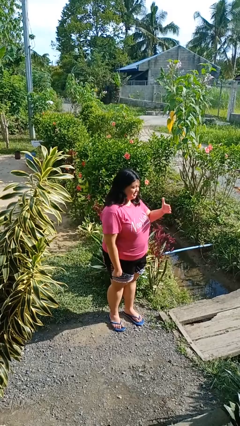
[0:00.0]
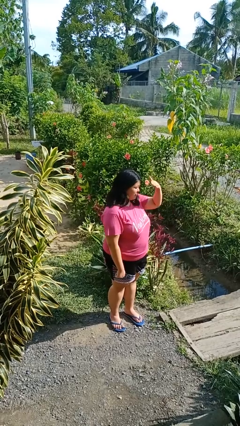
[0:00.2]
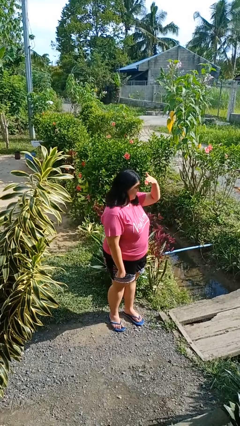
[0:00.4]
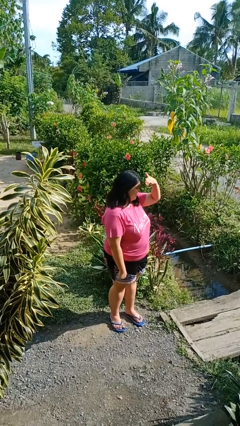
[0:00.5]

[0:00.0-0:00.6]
person shades eyes

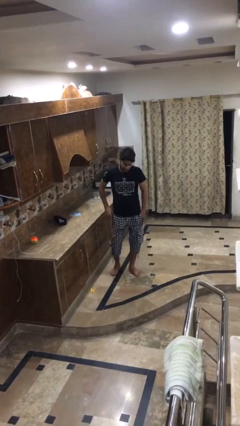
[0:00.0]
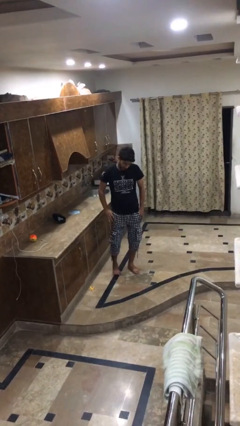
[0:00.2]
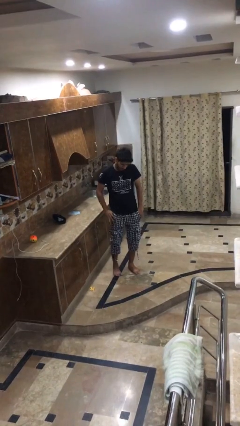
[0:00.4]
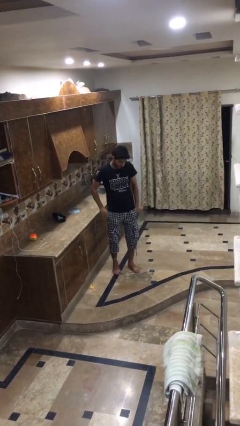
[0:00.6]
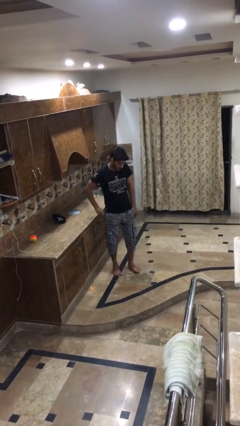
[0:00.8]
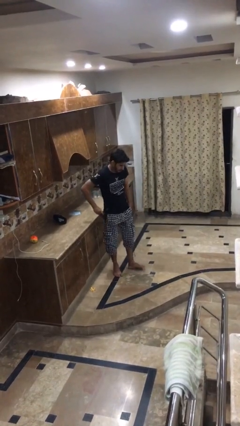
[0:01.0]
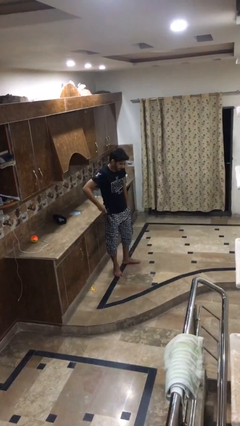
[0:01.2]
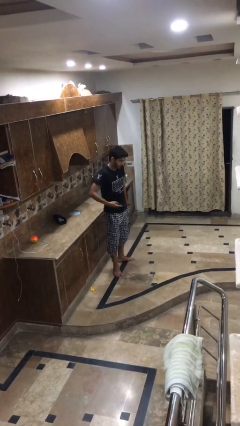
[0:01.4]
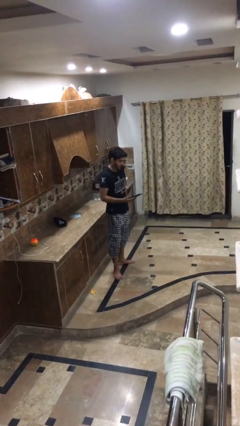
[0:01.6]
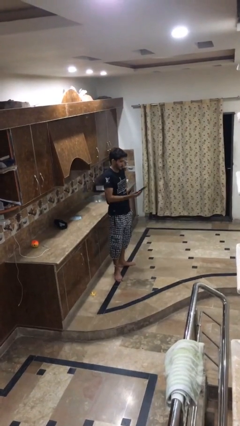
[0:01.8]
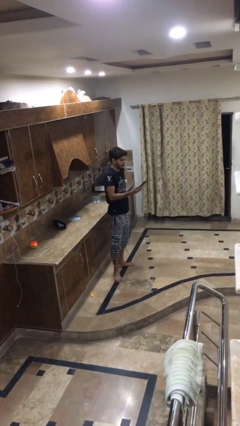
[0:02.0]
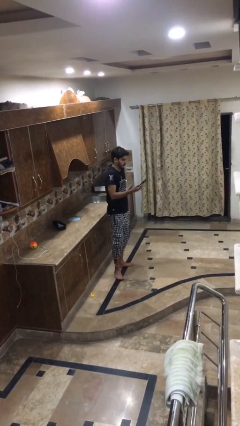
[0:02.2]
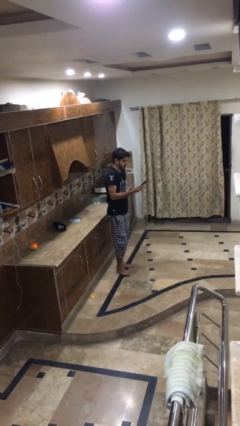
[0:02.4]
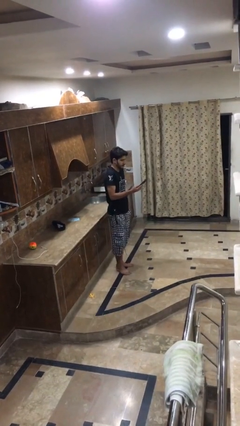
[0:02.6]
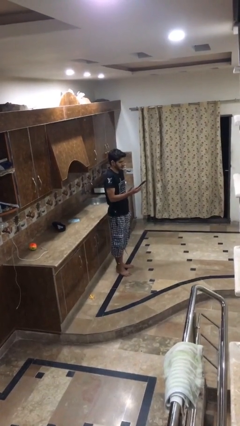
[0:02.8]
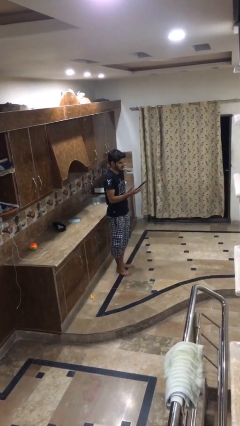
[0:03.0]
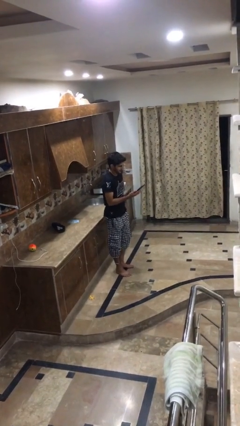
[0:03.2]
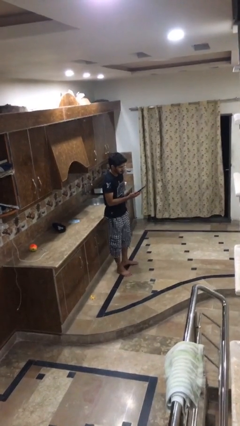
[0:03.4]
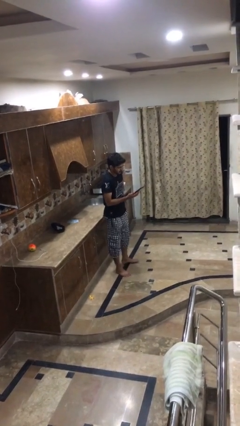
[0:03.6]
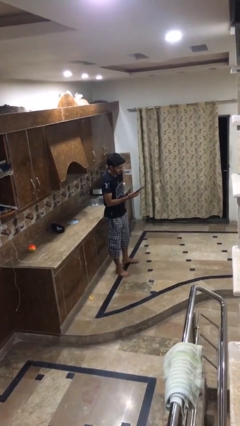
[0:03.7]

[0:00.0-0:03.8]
person takes phone from pocket

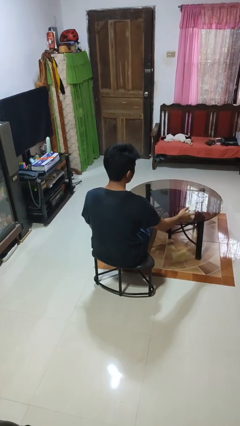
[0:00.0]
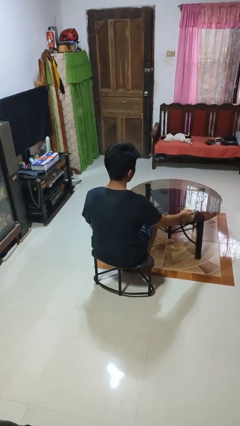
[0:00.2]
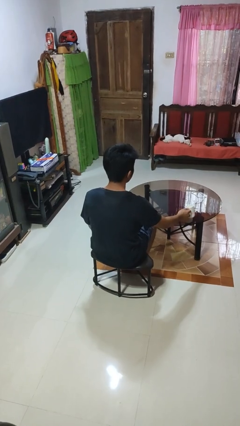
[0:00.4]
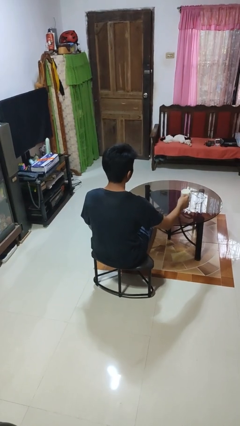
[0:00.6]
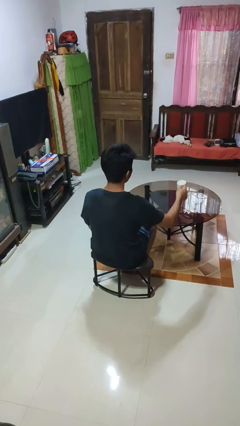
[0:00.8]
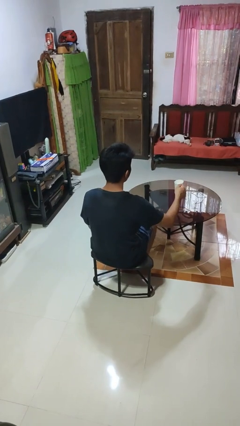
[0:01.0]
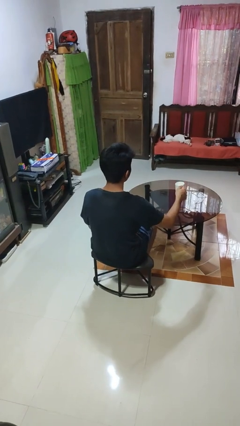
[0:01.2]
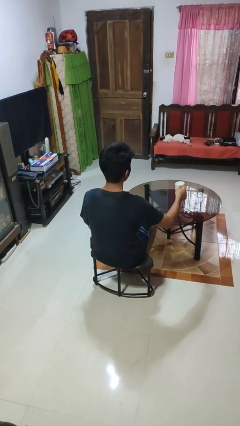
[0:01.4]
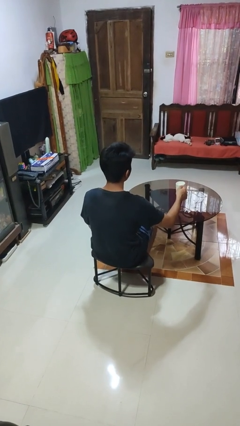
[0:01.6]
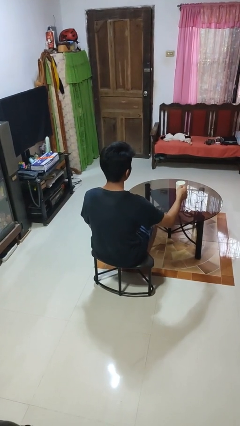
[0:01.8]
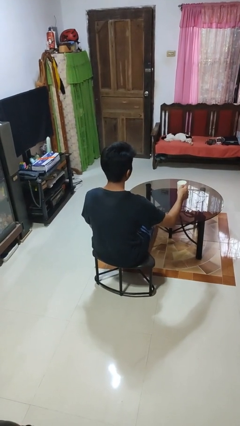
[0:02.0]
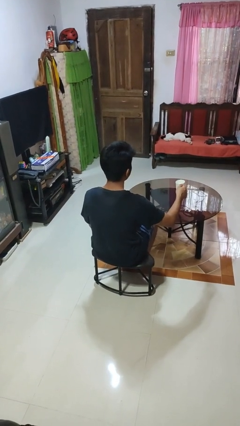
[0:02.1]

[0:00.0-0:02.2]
person picks up object from table

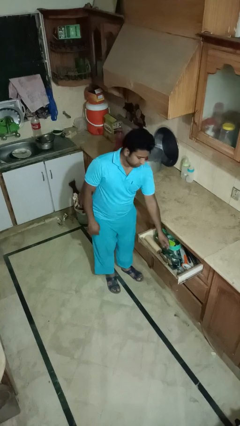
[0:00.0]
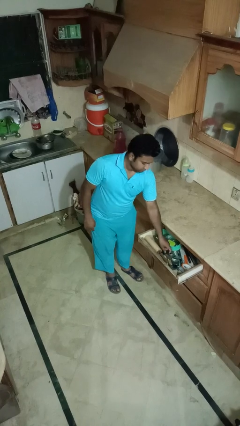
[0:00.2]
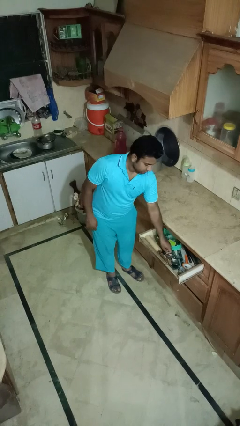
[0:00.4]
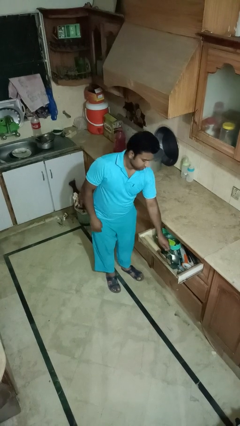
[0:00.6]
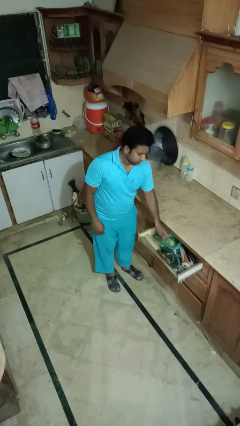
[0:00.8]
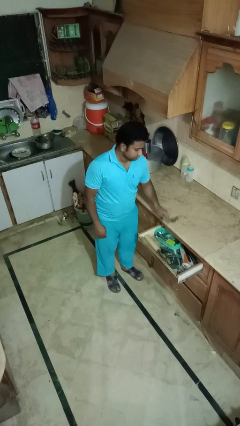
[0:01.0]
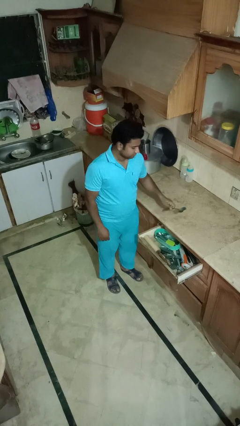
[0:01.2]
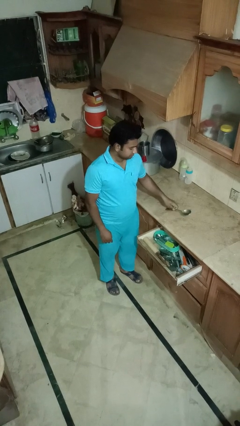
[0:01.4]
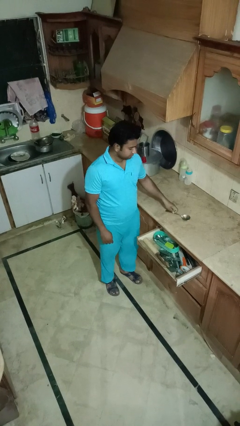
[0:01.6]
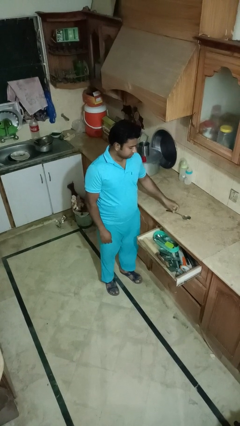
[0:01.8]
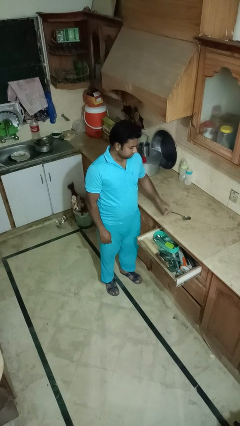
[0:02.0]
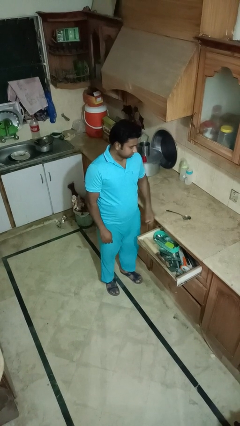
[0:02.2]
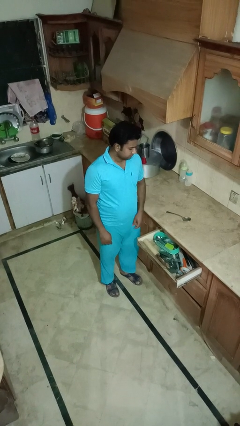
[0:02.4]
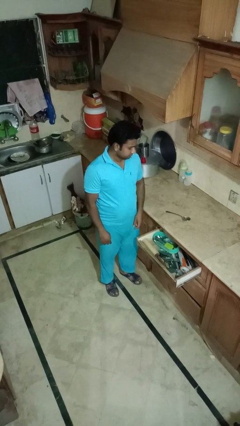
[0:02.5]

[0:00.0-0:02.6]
person takes object from kitchen drawer

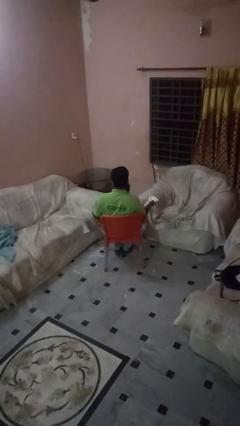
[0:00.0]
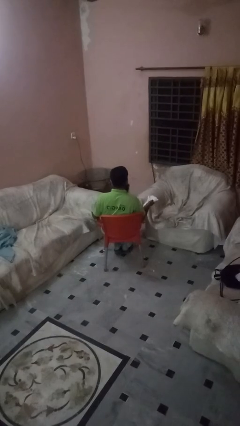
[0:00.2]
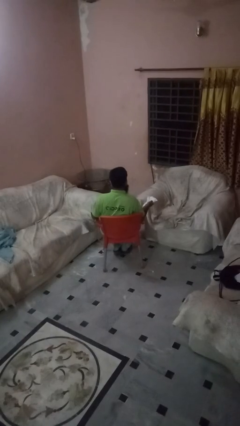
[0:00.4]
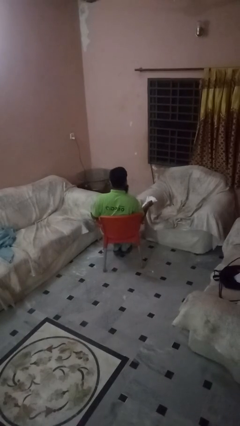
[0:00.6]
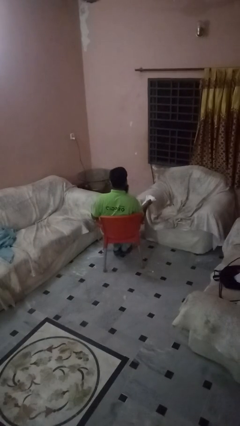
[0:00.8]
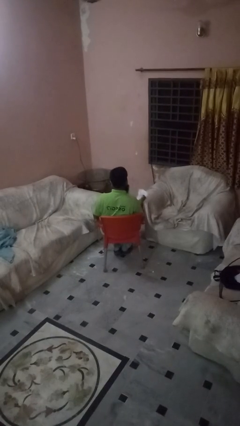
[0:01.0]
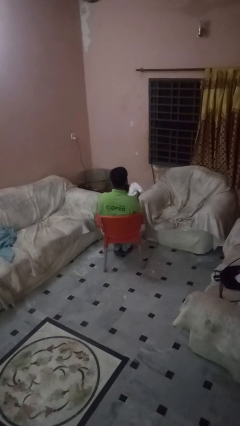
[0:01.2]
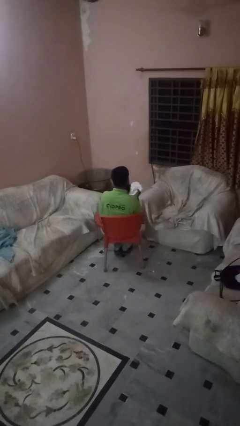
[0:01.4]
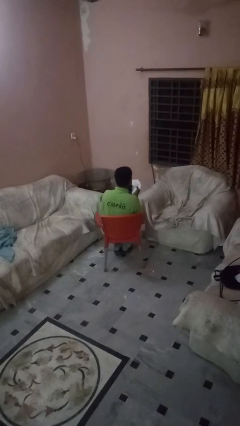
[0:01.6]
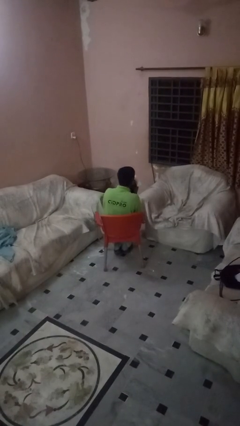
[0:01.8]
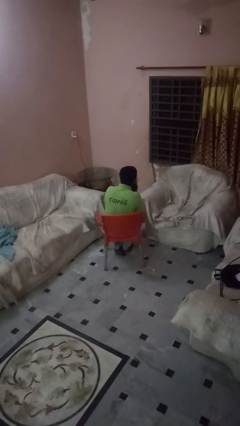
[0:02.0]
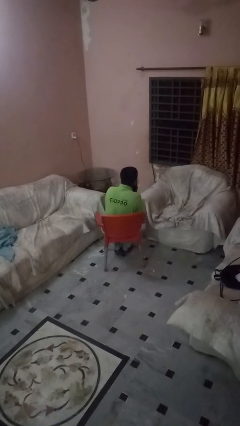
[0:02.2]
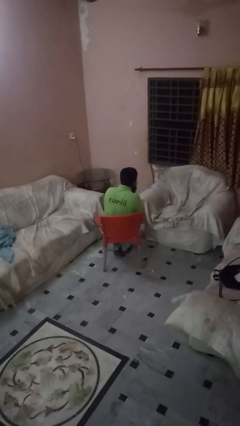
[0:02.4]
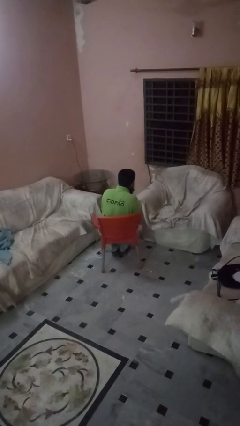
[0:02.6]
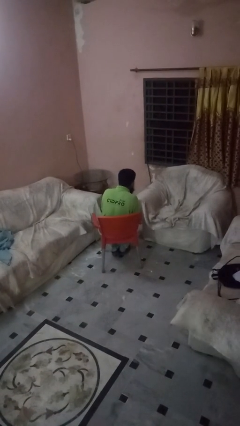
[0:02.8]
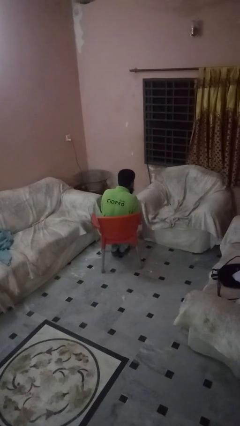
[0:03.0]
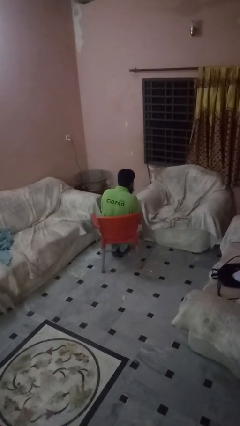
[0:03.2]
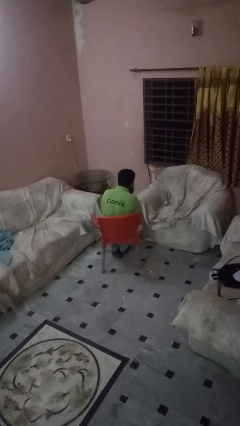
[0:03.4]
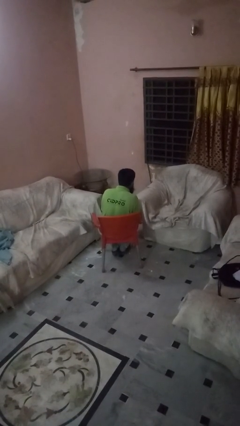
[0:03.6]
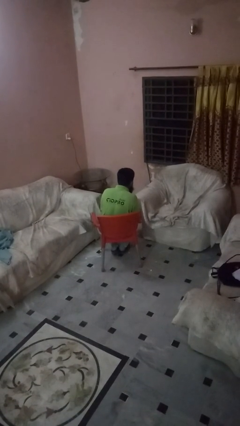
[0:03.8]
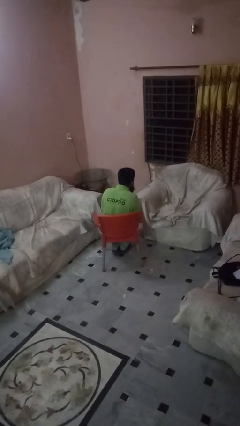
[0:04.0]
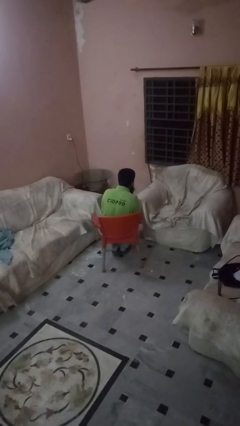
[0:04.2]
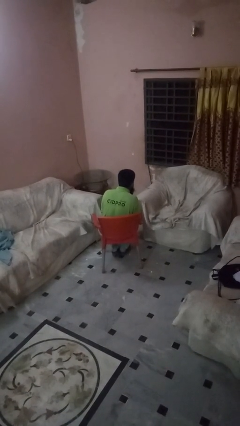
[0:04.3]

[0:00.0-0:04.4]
person blows nose

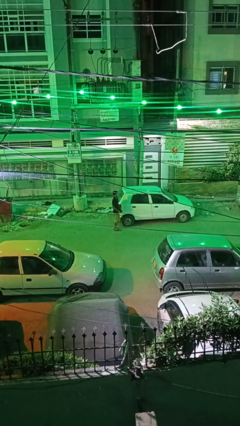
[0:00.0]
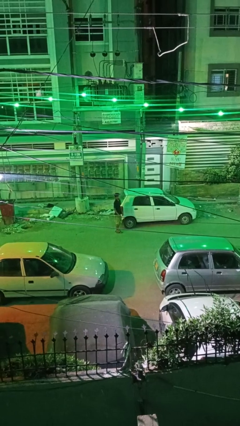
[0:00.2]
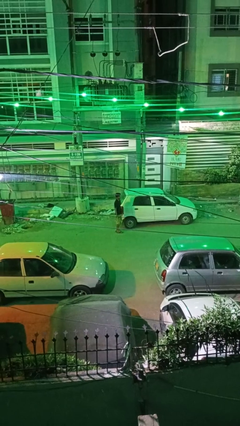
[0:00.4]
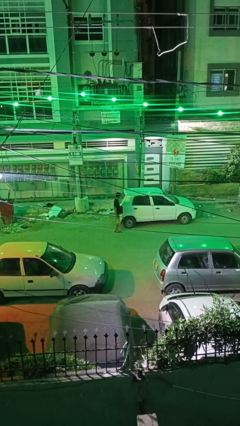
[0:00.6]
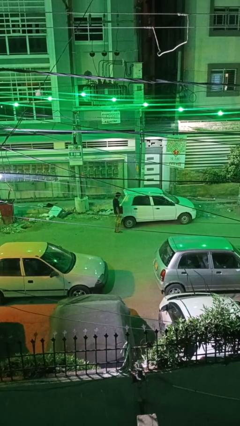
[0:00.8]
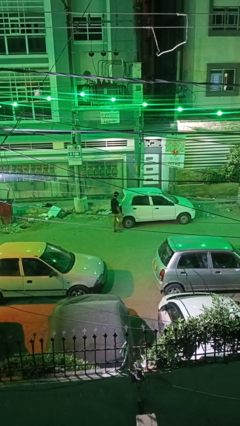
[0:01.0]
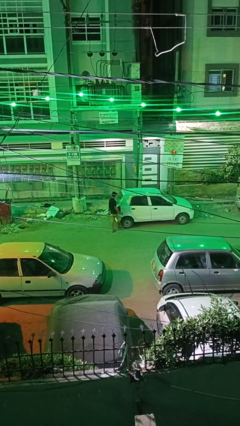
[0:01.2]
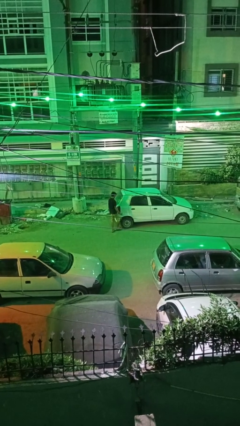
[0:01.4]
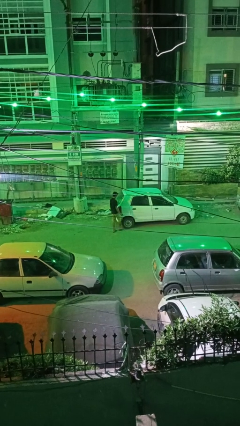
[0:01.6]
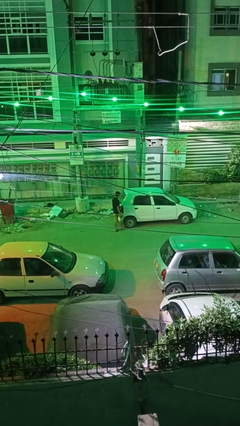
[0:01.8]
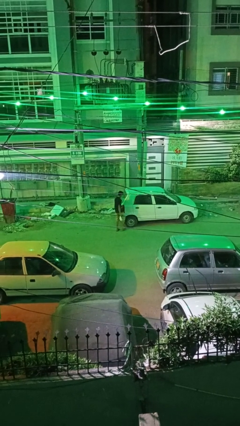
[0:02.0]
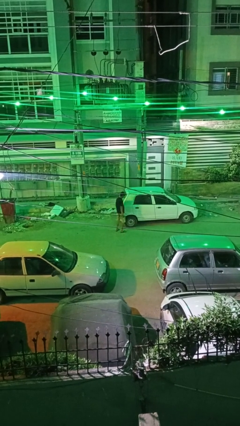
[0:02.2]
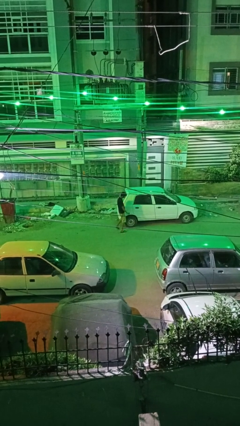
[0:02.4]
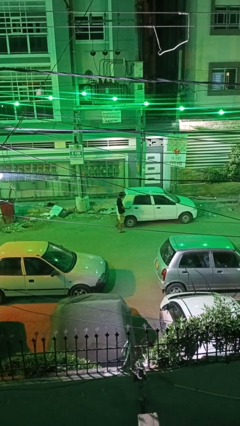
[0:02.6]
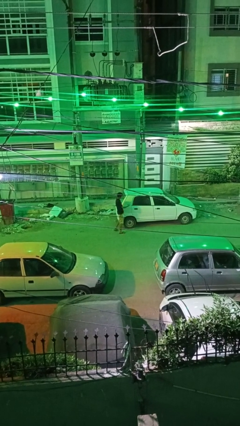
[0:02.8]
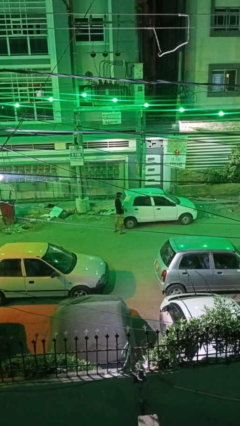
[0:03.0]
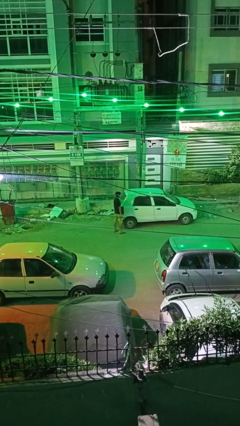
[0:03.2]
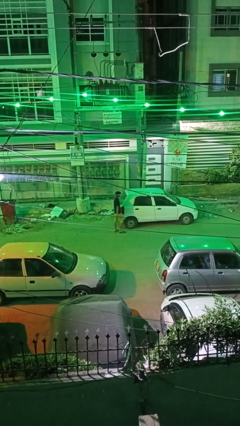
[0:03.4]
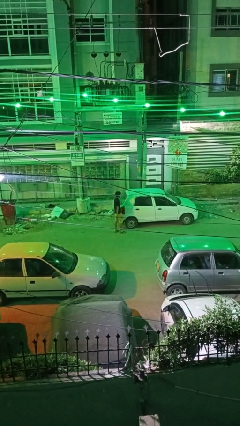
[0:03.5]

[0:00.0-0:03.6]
person kicks car tires
